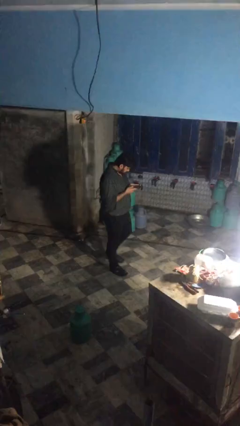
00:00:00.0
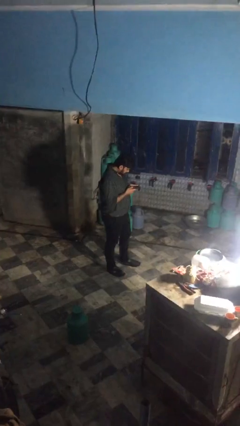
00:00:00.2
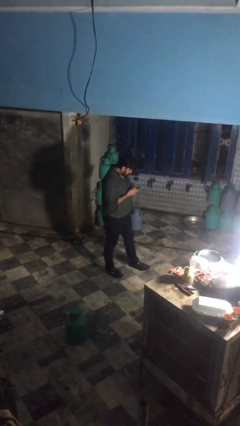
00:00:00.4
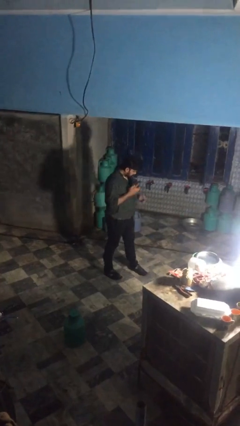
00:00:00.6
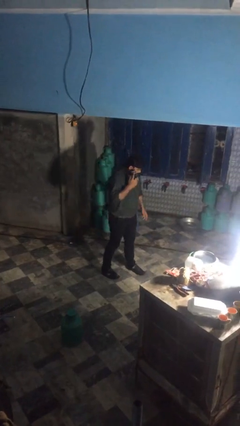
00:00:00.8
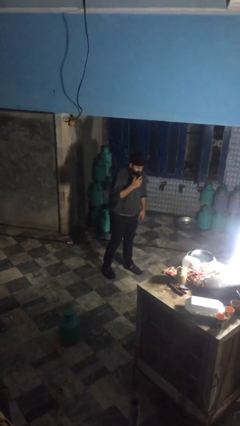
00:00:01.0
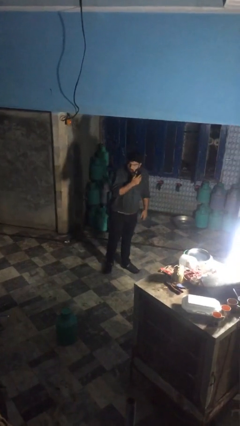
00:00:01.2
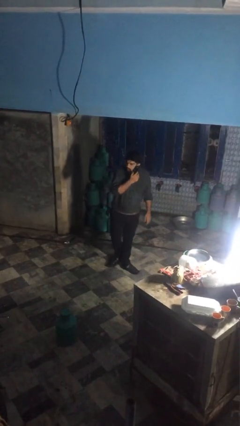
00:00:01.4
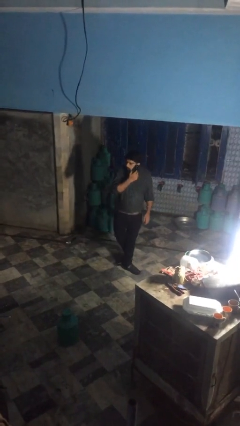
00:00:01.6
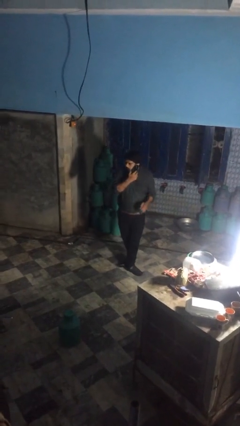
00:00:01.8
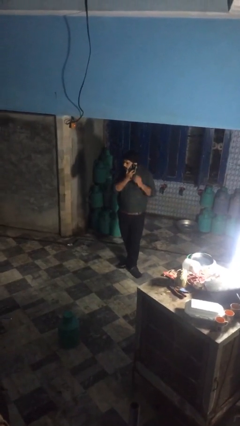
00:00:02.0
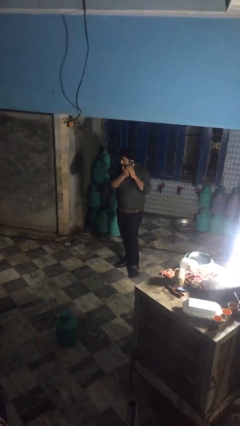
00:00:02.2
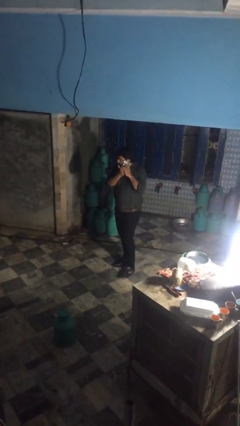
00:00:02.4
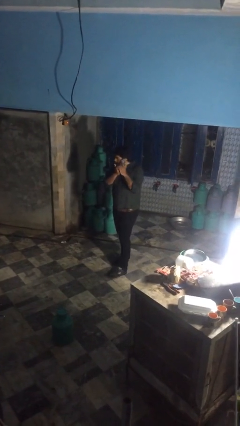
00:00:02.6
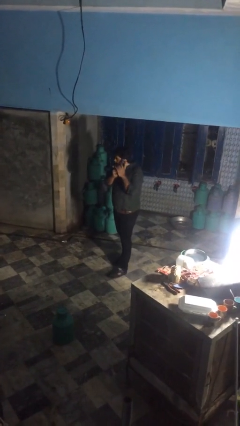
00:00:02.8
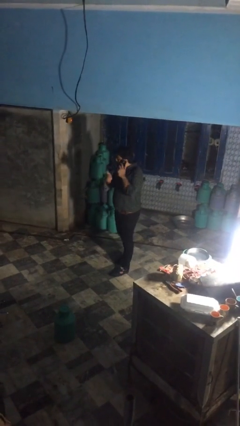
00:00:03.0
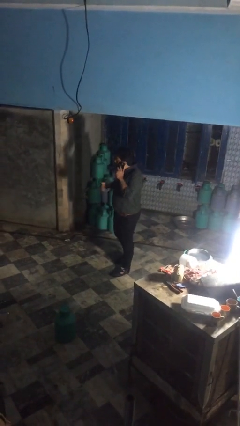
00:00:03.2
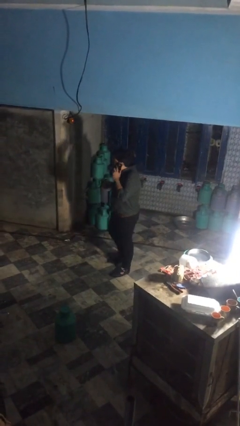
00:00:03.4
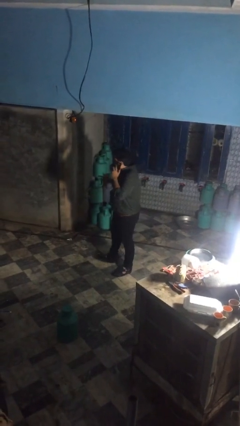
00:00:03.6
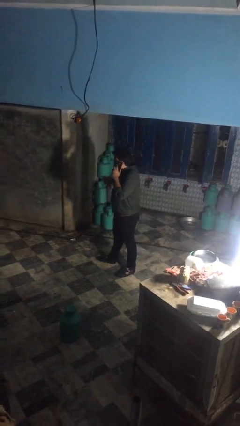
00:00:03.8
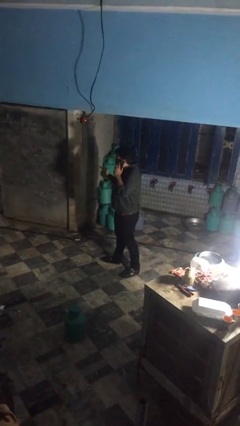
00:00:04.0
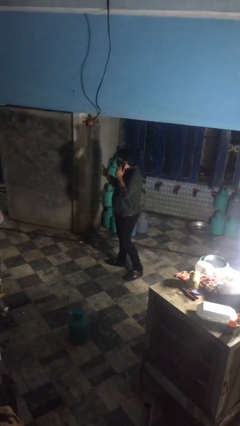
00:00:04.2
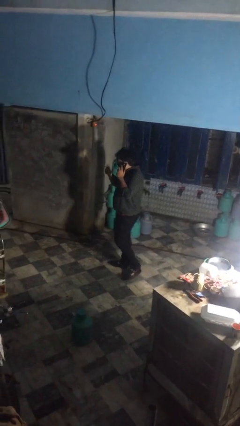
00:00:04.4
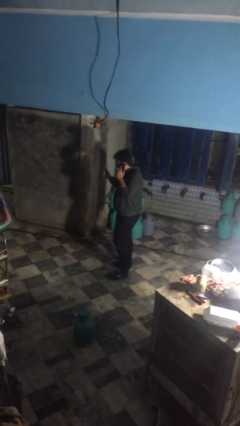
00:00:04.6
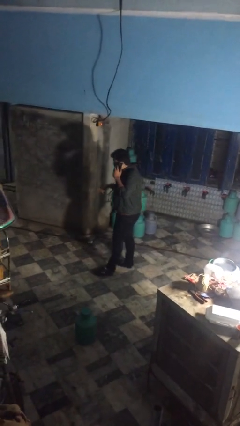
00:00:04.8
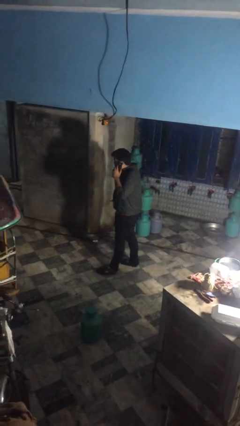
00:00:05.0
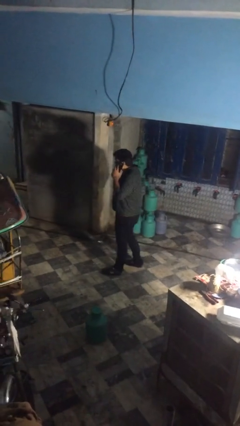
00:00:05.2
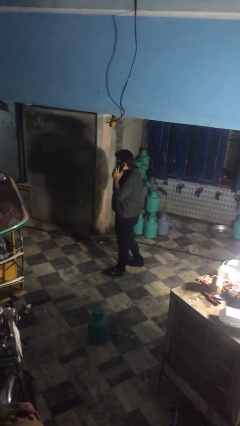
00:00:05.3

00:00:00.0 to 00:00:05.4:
person talks on phone

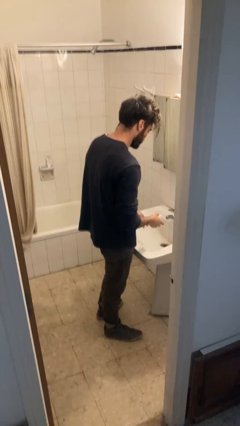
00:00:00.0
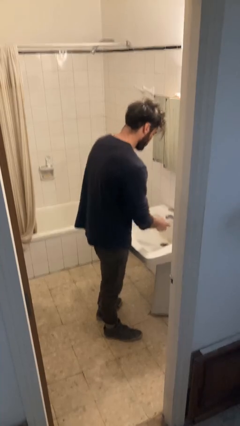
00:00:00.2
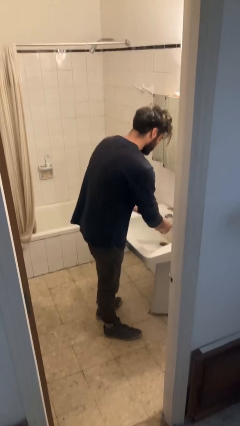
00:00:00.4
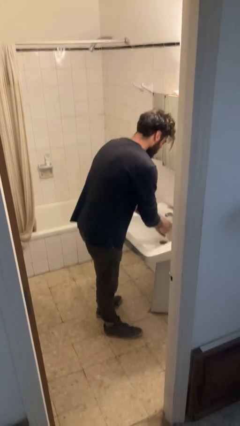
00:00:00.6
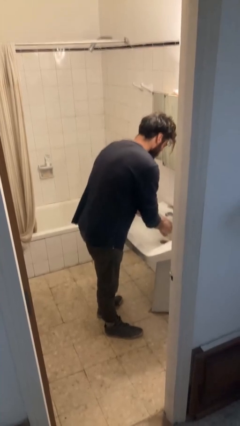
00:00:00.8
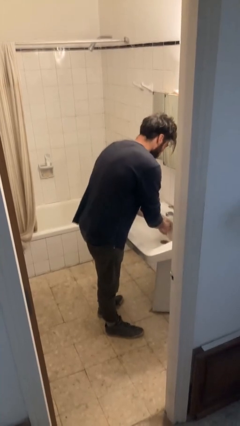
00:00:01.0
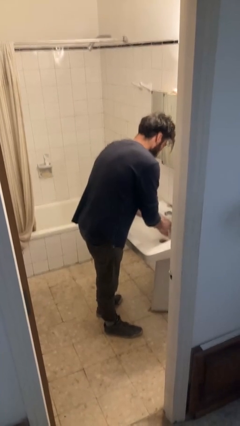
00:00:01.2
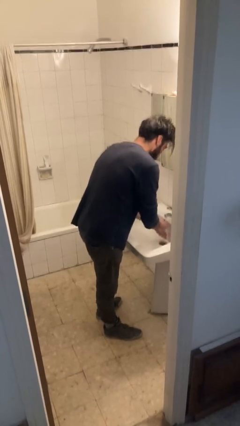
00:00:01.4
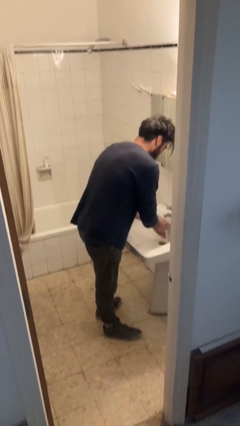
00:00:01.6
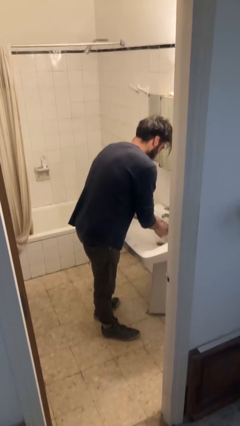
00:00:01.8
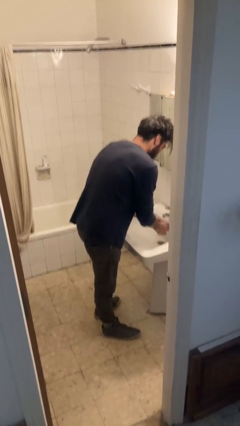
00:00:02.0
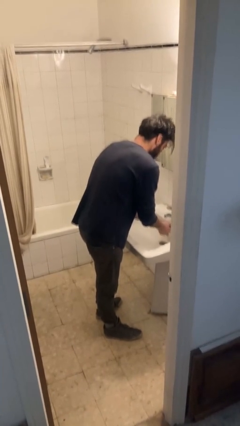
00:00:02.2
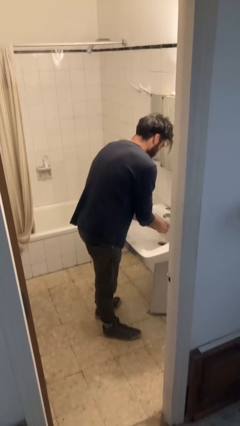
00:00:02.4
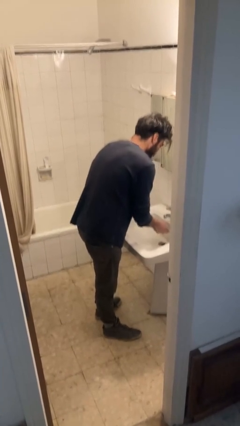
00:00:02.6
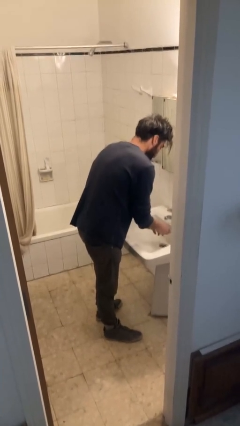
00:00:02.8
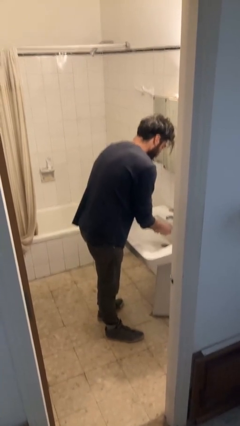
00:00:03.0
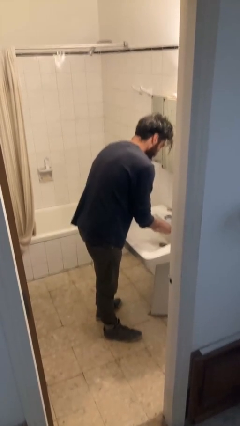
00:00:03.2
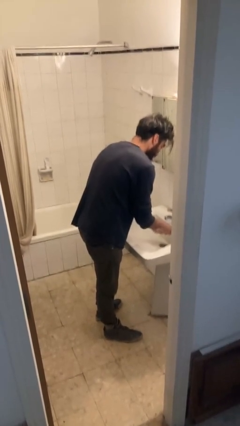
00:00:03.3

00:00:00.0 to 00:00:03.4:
person washes hands

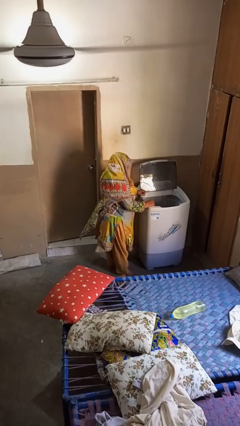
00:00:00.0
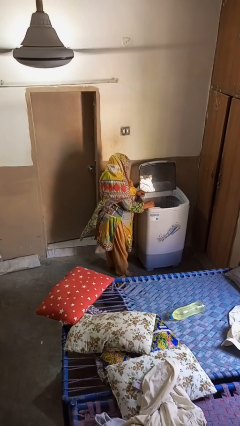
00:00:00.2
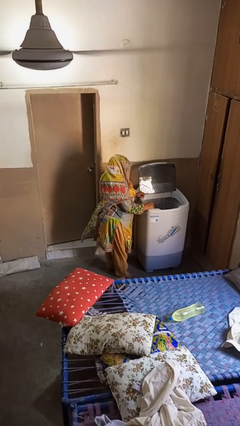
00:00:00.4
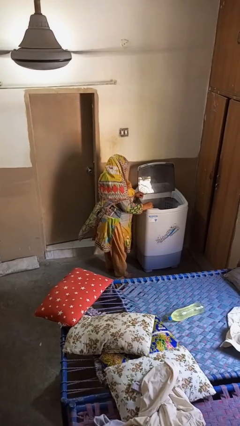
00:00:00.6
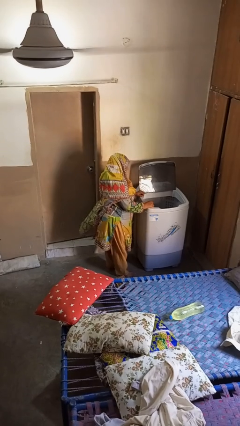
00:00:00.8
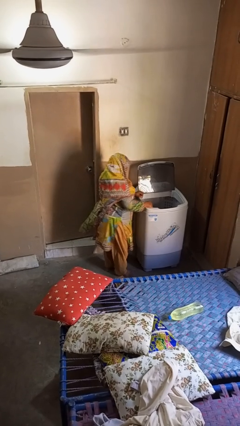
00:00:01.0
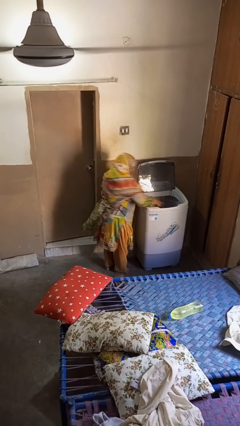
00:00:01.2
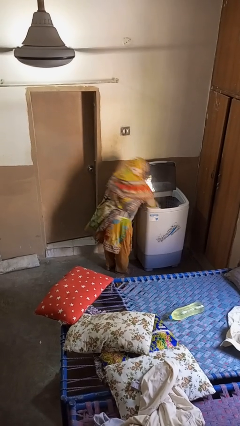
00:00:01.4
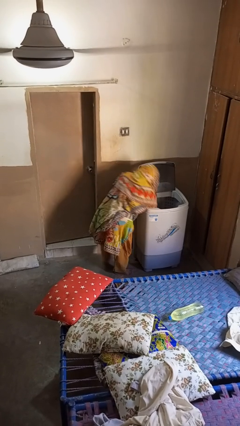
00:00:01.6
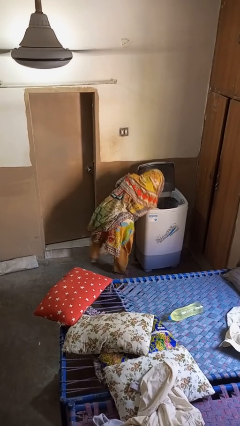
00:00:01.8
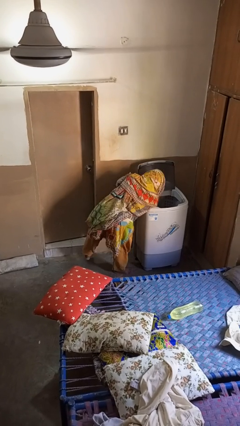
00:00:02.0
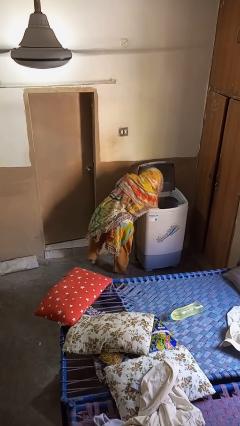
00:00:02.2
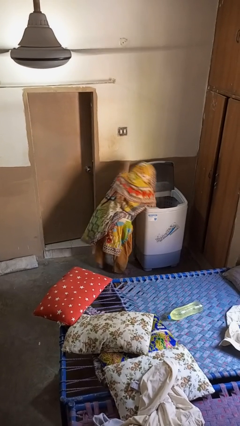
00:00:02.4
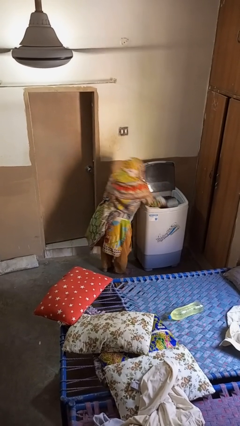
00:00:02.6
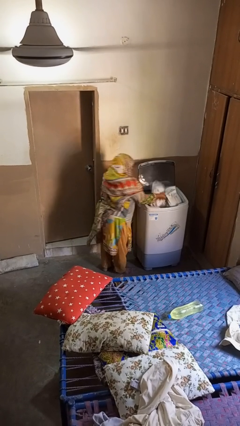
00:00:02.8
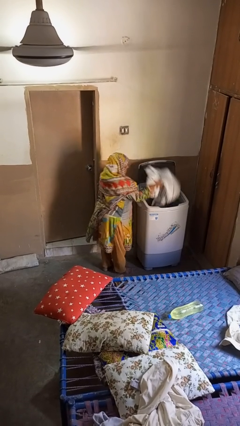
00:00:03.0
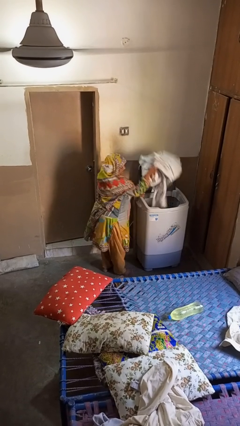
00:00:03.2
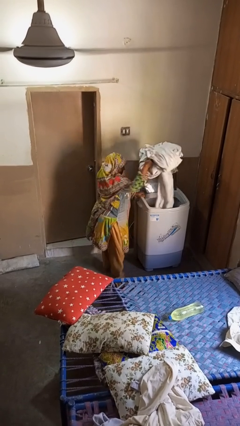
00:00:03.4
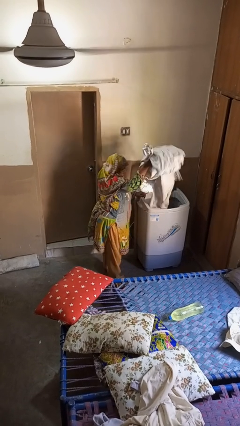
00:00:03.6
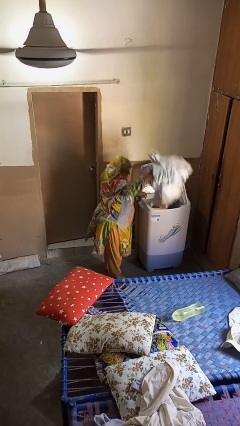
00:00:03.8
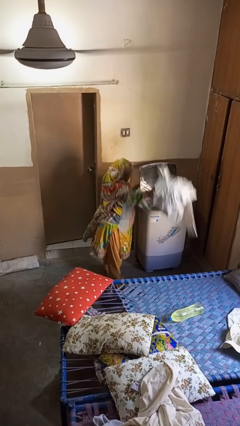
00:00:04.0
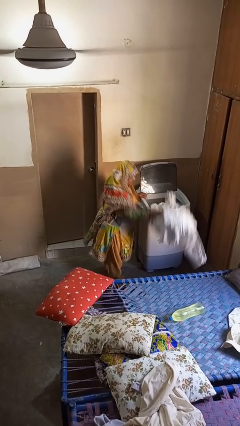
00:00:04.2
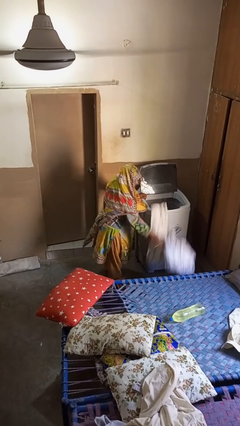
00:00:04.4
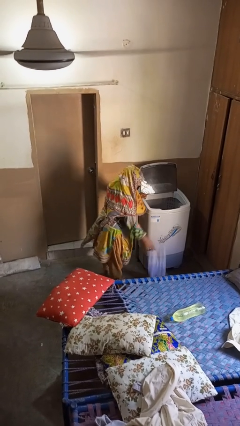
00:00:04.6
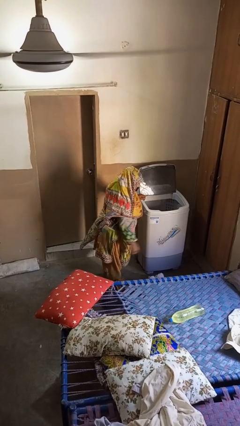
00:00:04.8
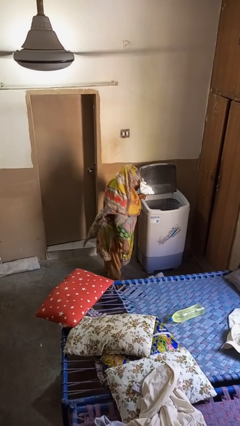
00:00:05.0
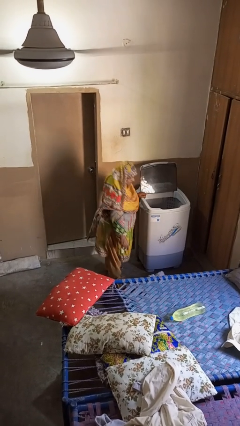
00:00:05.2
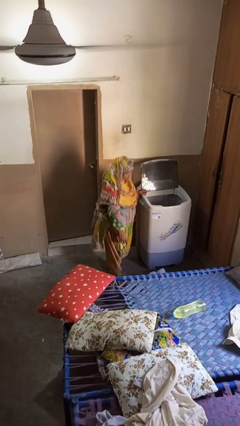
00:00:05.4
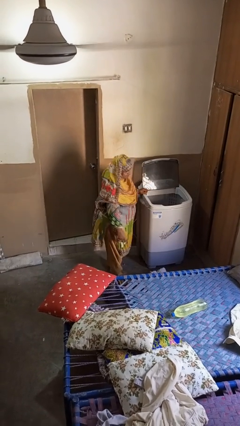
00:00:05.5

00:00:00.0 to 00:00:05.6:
person unloads clotheswasher

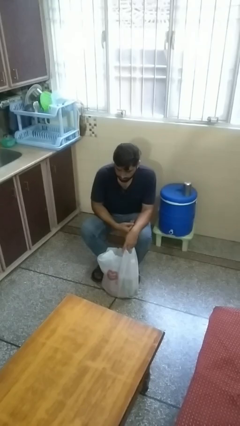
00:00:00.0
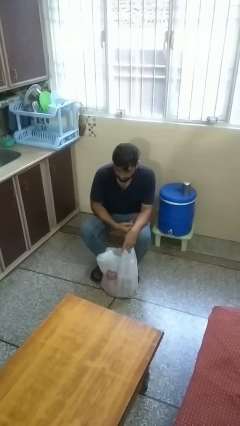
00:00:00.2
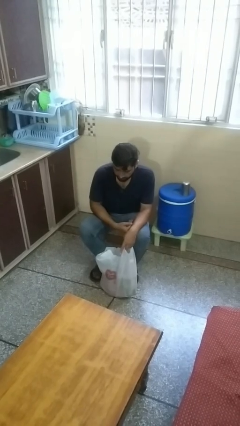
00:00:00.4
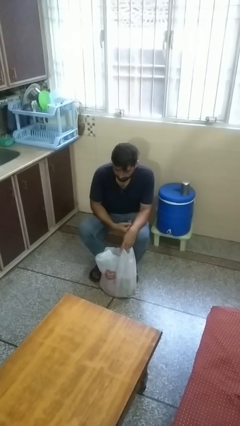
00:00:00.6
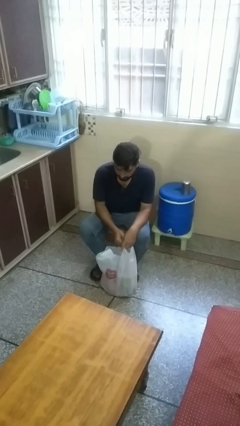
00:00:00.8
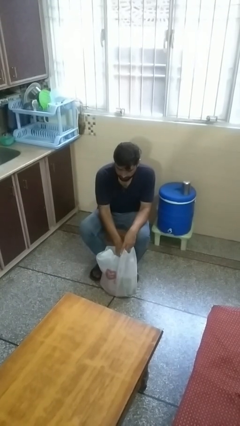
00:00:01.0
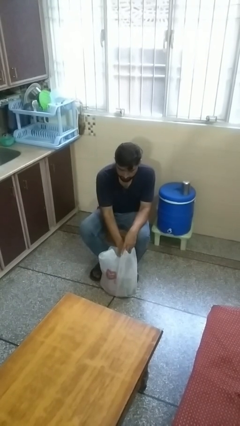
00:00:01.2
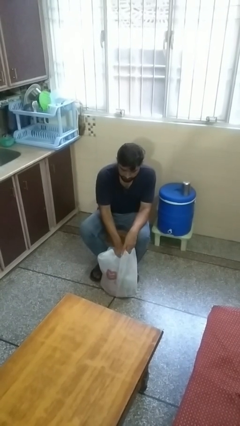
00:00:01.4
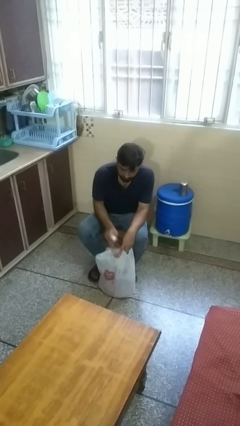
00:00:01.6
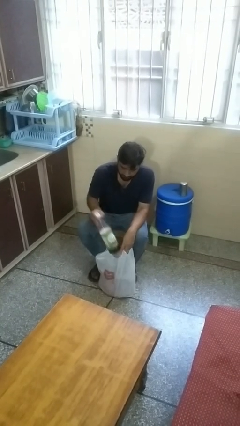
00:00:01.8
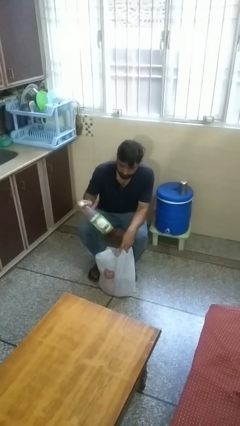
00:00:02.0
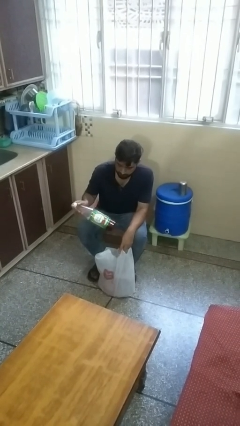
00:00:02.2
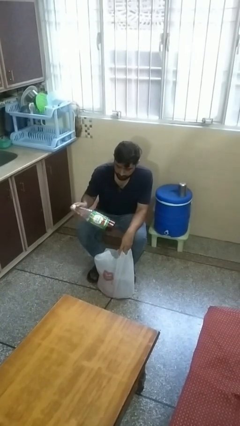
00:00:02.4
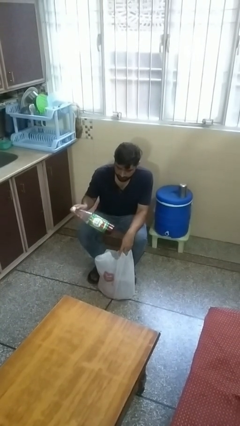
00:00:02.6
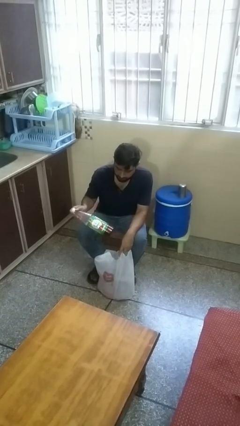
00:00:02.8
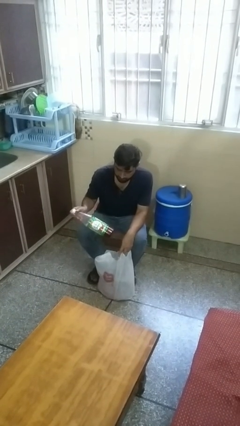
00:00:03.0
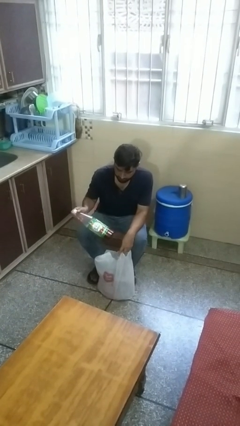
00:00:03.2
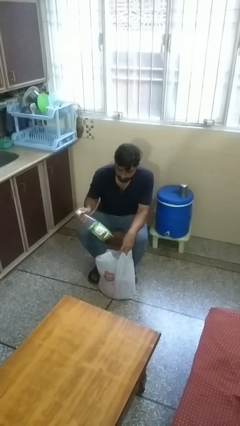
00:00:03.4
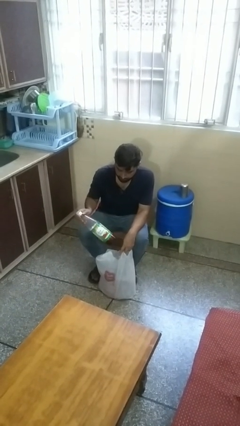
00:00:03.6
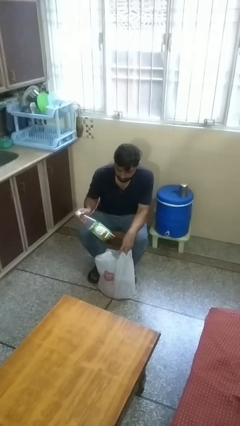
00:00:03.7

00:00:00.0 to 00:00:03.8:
person takes object from bag
